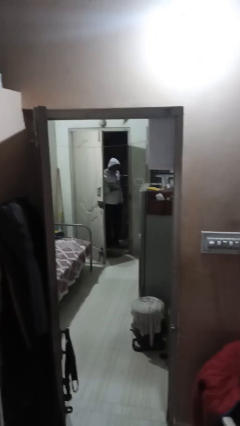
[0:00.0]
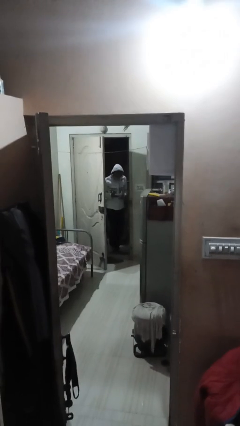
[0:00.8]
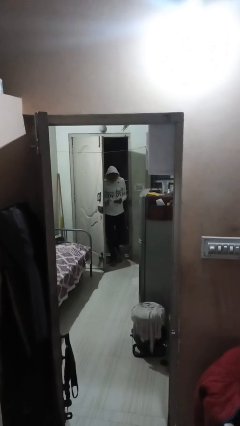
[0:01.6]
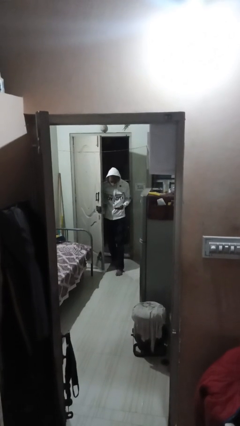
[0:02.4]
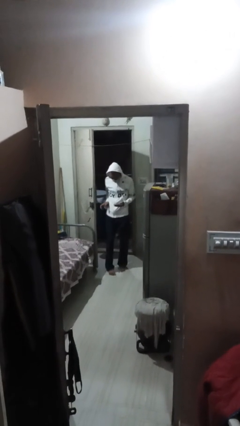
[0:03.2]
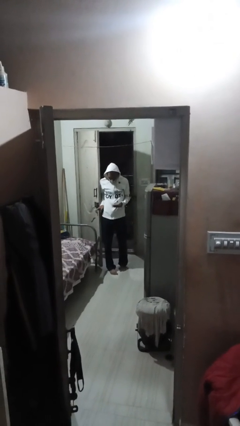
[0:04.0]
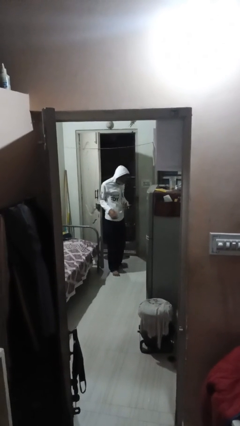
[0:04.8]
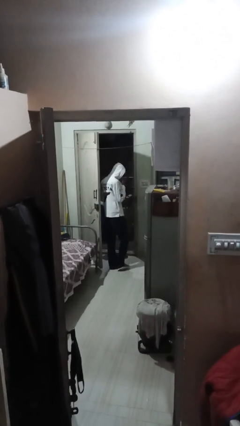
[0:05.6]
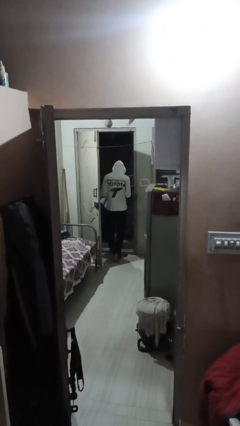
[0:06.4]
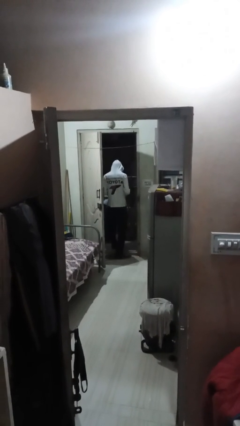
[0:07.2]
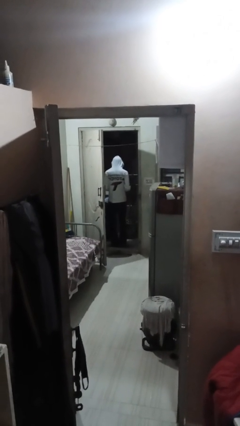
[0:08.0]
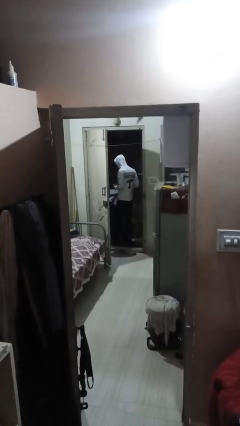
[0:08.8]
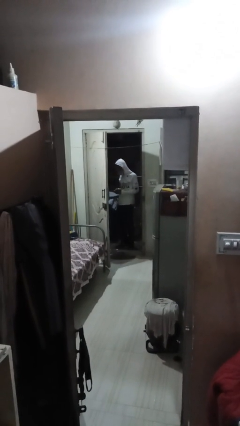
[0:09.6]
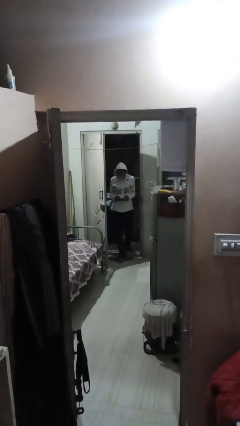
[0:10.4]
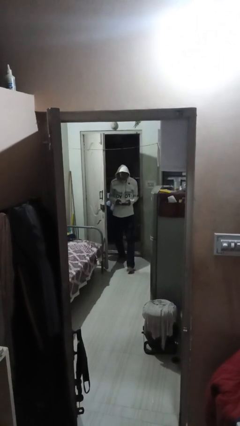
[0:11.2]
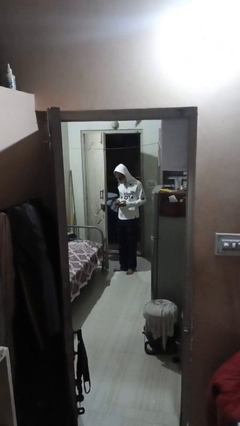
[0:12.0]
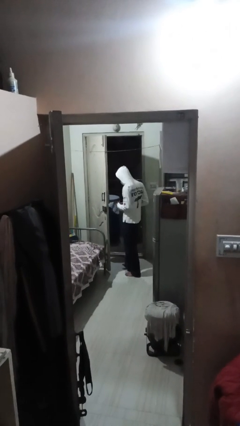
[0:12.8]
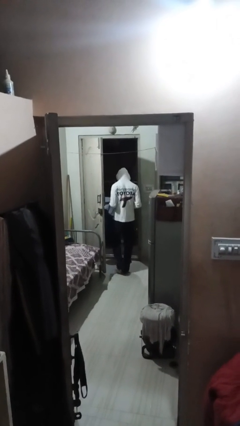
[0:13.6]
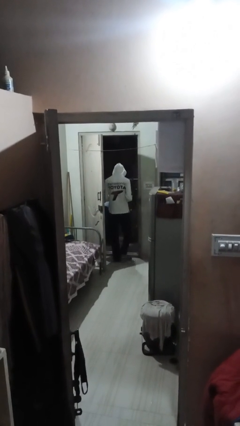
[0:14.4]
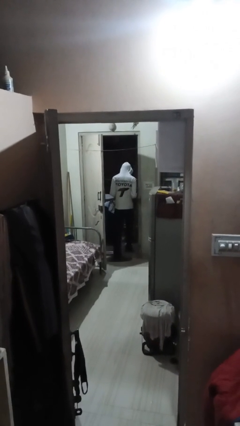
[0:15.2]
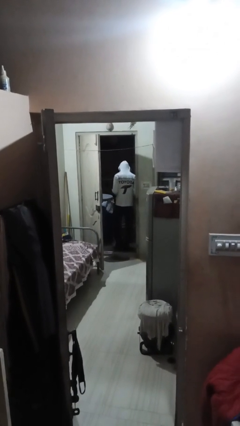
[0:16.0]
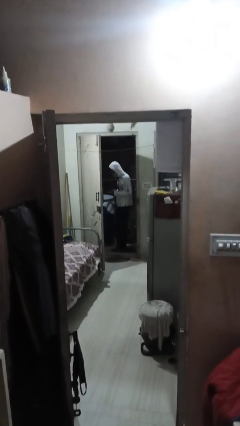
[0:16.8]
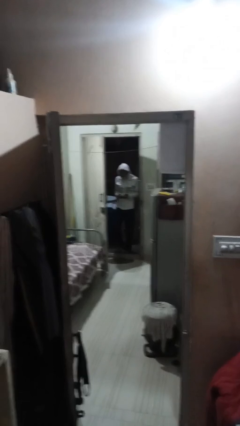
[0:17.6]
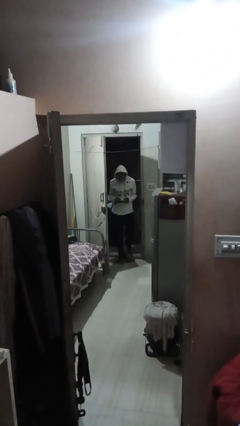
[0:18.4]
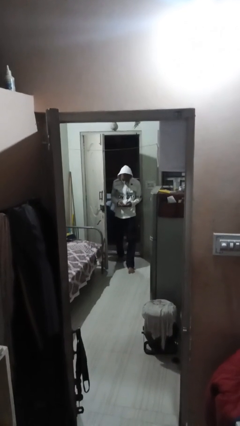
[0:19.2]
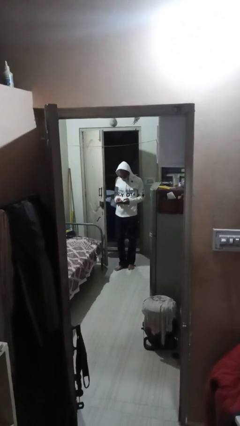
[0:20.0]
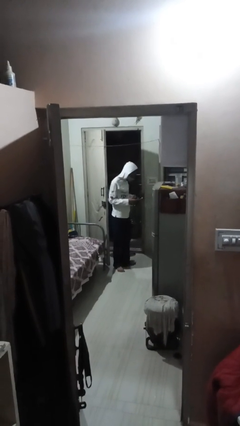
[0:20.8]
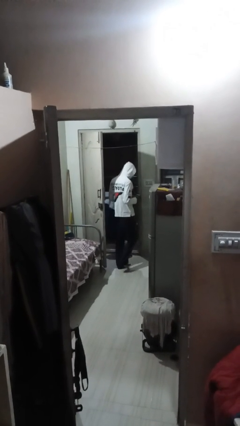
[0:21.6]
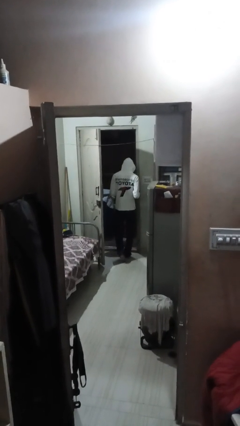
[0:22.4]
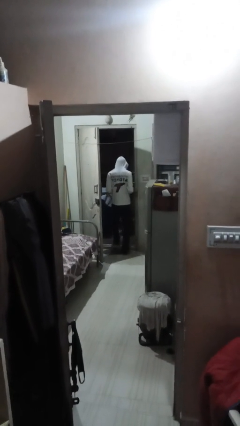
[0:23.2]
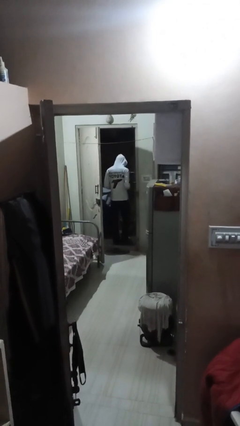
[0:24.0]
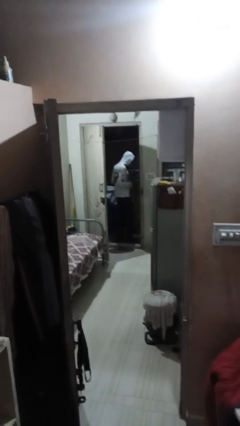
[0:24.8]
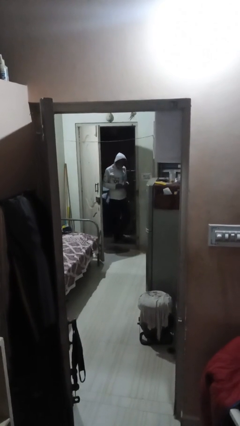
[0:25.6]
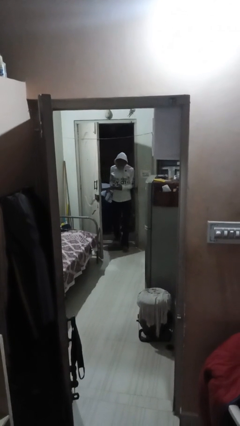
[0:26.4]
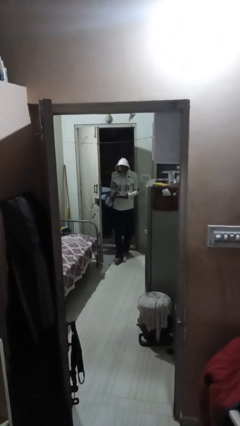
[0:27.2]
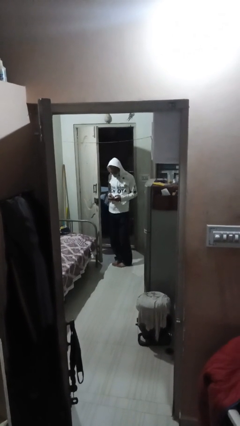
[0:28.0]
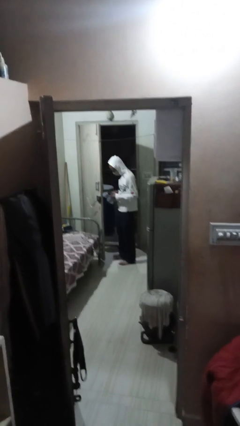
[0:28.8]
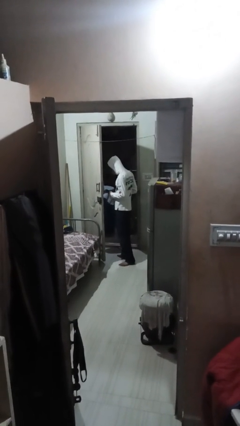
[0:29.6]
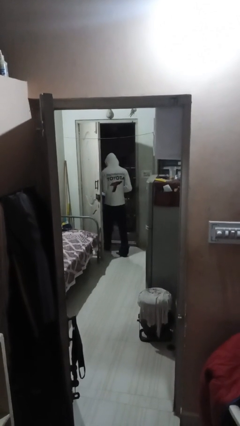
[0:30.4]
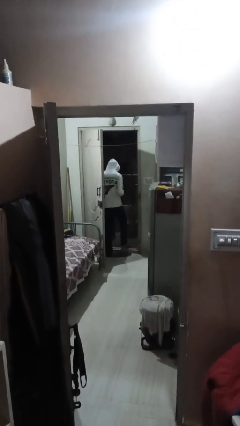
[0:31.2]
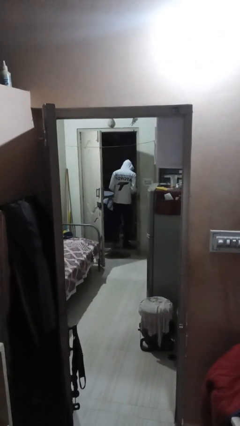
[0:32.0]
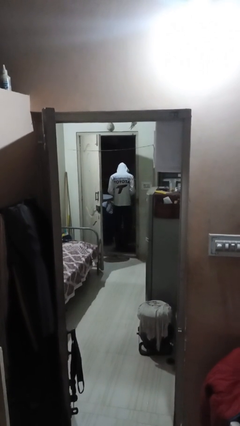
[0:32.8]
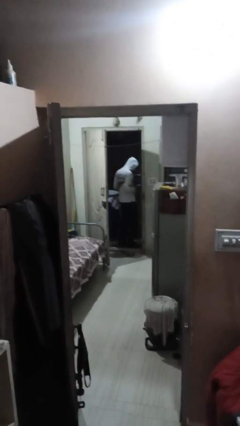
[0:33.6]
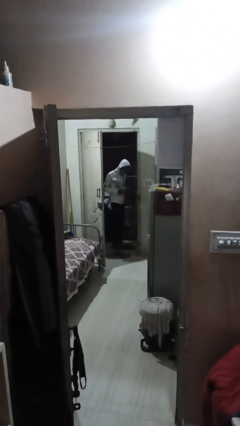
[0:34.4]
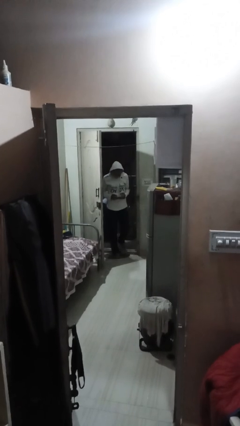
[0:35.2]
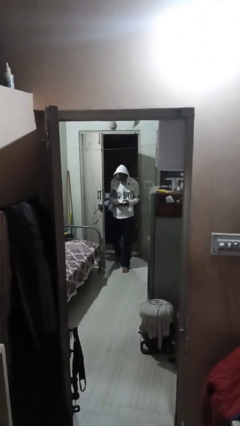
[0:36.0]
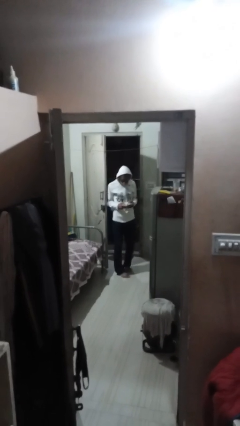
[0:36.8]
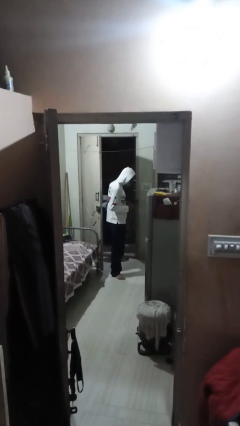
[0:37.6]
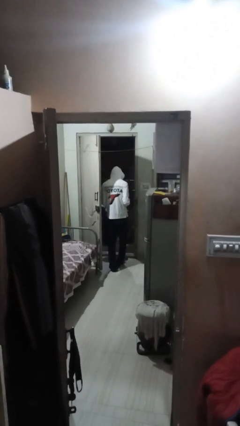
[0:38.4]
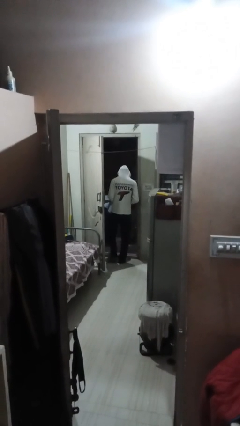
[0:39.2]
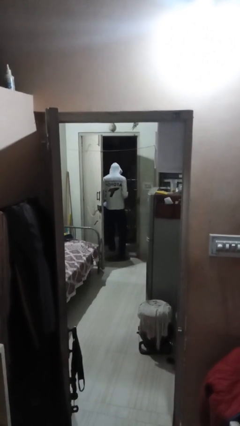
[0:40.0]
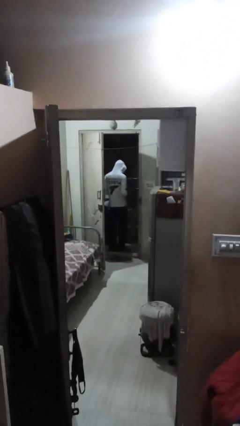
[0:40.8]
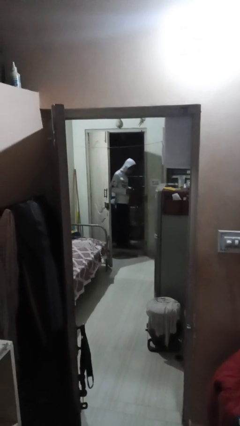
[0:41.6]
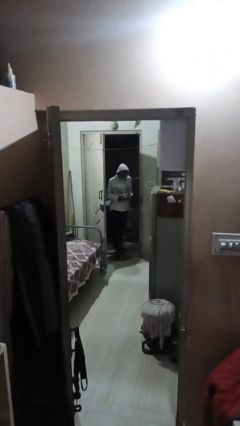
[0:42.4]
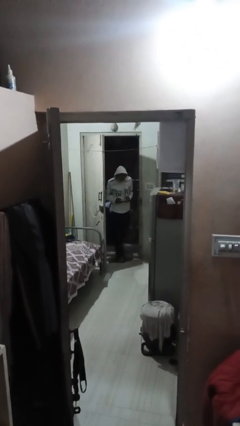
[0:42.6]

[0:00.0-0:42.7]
person texts on phone

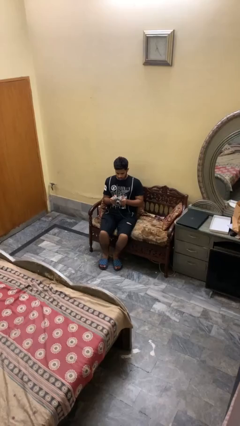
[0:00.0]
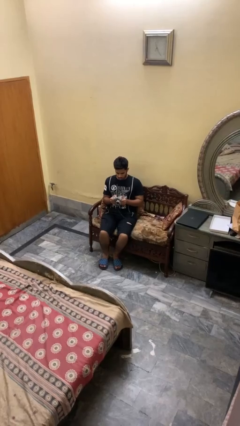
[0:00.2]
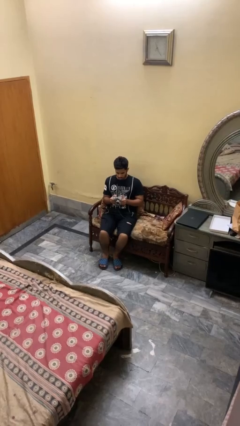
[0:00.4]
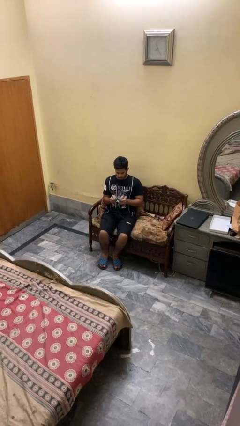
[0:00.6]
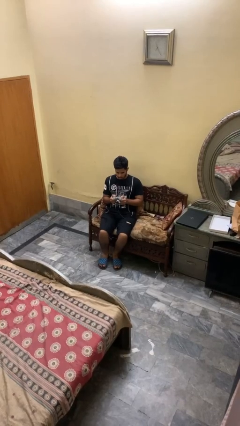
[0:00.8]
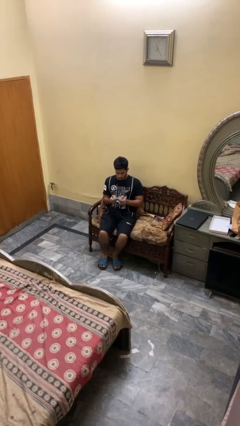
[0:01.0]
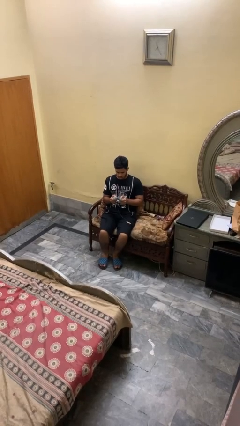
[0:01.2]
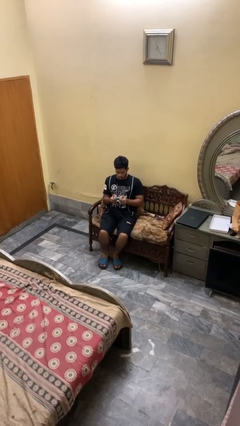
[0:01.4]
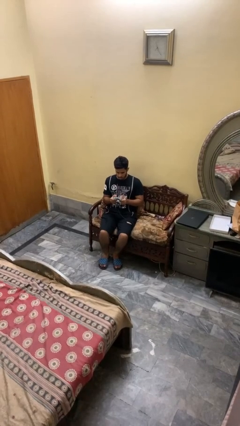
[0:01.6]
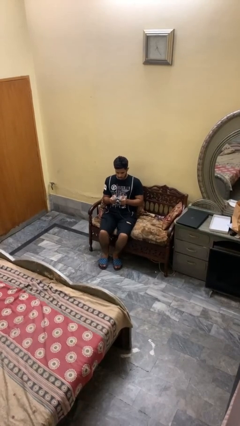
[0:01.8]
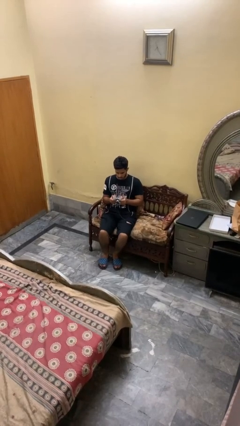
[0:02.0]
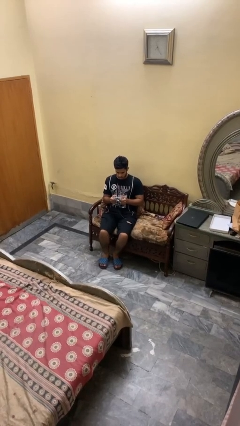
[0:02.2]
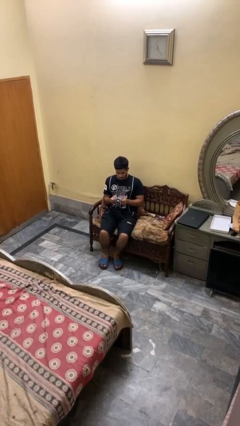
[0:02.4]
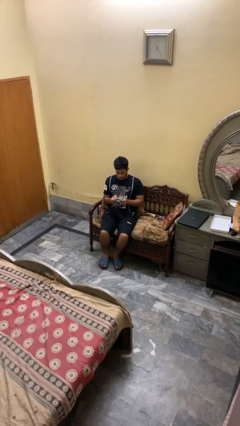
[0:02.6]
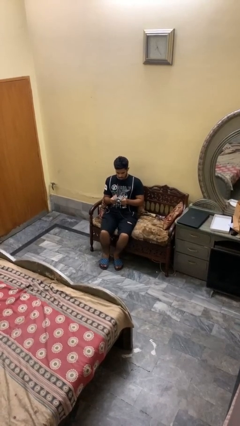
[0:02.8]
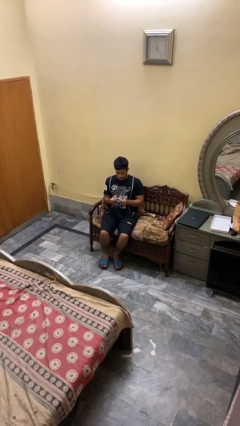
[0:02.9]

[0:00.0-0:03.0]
person interacts with handheld game

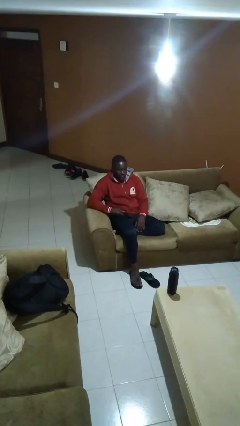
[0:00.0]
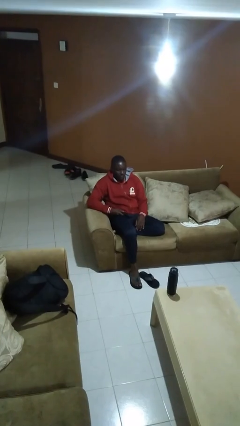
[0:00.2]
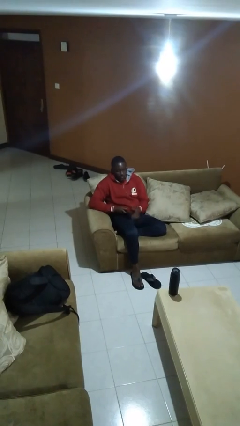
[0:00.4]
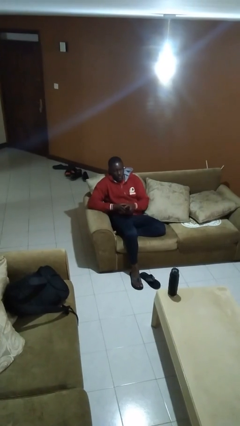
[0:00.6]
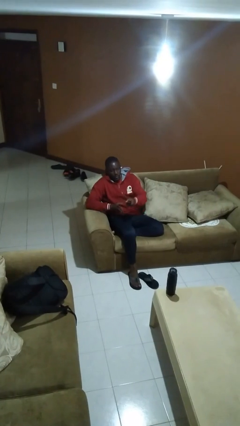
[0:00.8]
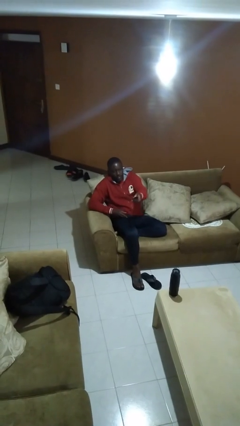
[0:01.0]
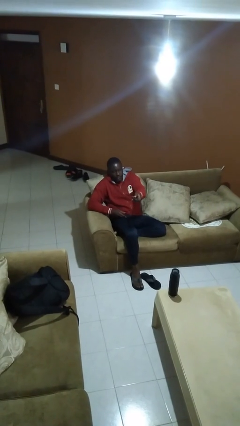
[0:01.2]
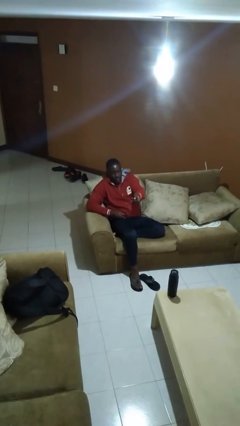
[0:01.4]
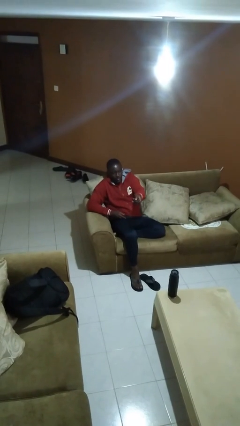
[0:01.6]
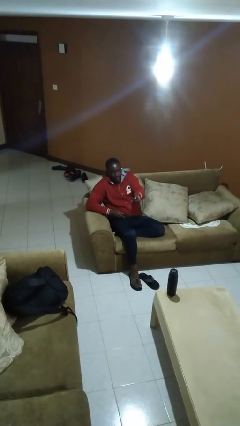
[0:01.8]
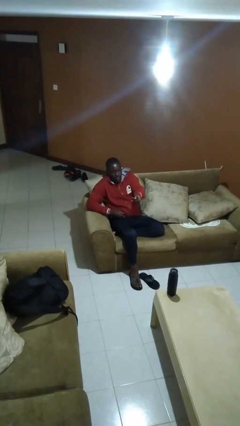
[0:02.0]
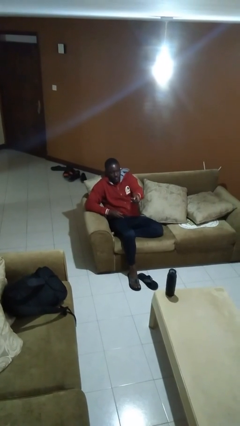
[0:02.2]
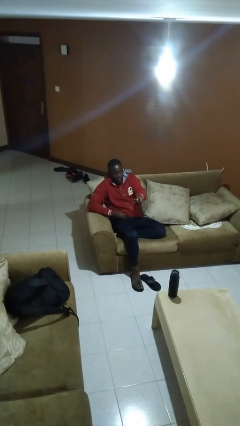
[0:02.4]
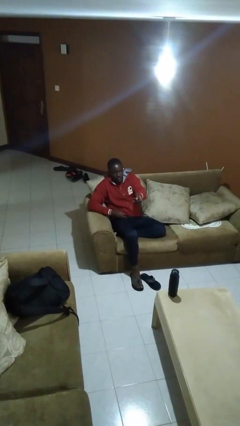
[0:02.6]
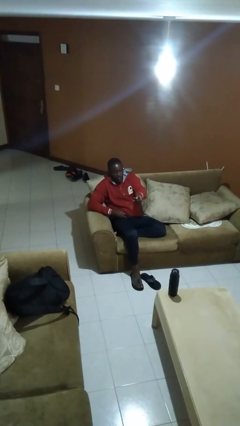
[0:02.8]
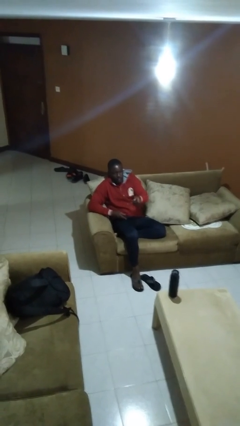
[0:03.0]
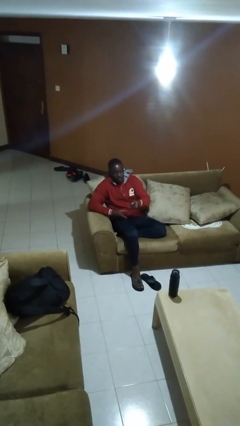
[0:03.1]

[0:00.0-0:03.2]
person uses television remote

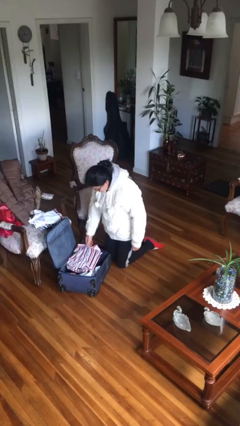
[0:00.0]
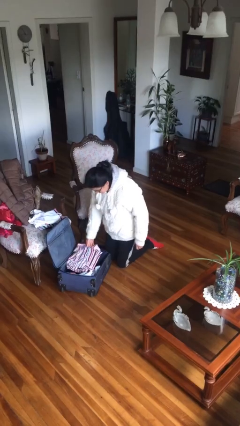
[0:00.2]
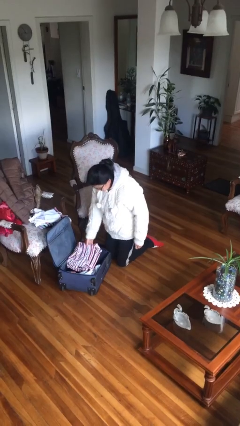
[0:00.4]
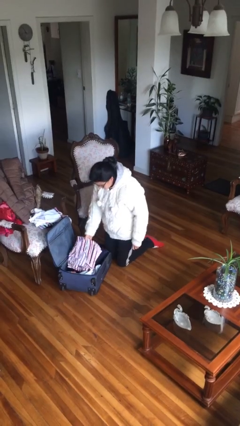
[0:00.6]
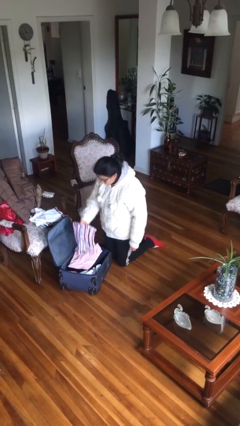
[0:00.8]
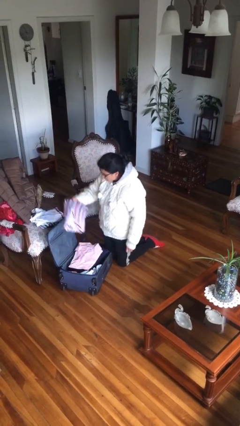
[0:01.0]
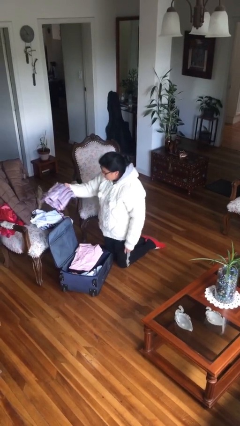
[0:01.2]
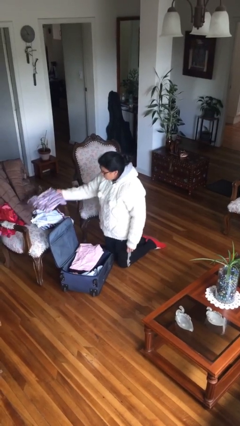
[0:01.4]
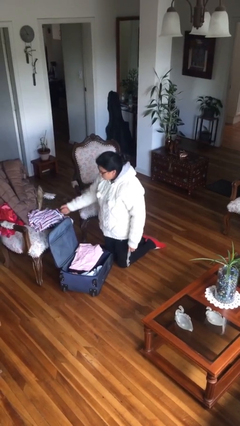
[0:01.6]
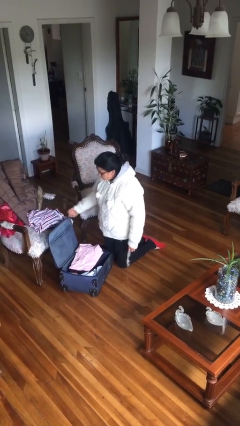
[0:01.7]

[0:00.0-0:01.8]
person unloads clothes from suitcase
